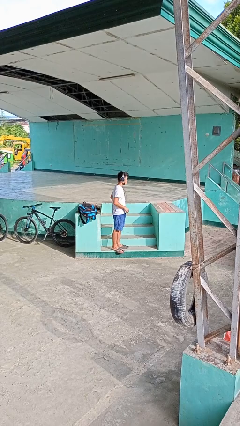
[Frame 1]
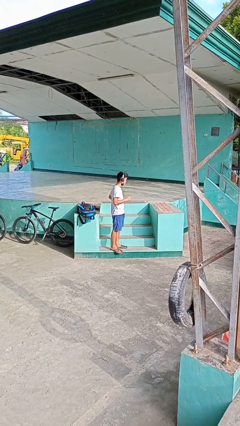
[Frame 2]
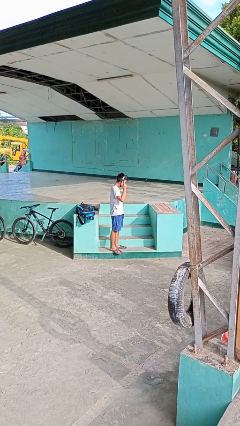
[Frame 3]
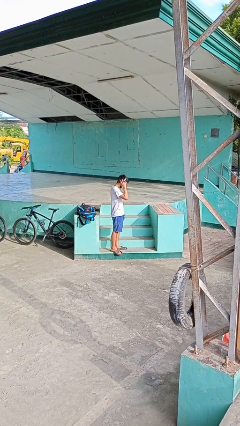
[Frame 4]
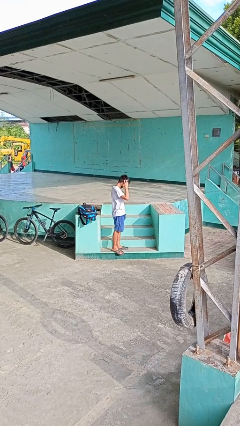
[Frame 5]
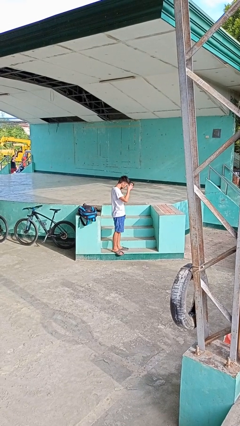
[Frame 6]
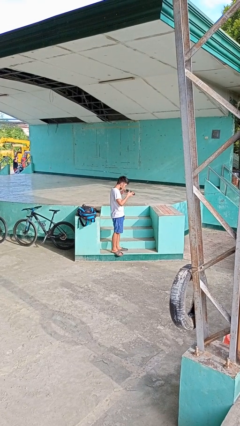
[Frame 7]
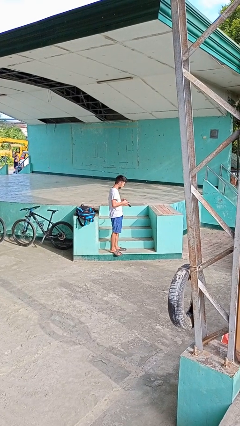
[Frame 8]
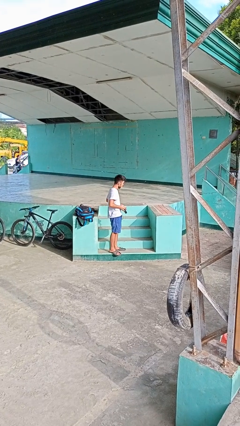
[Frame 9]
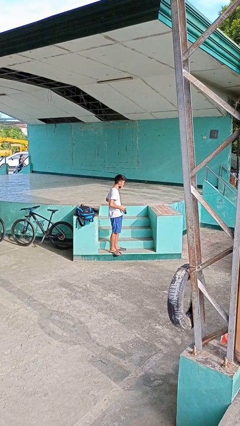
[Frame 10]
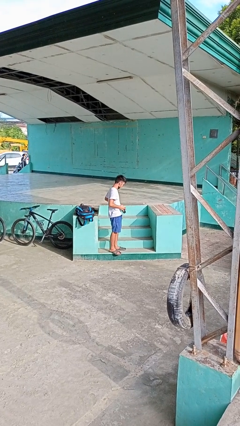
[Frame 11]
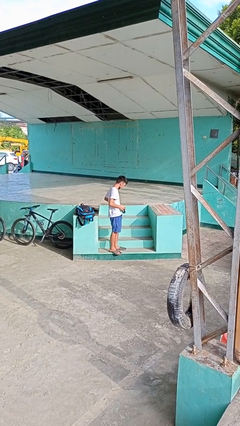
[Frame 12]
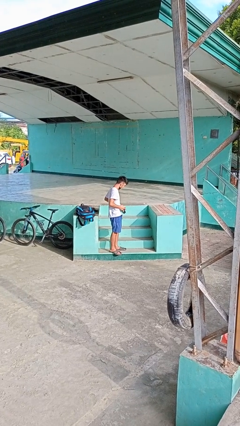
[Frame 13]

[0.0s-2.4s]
person takes off headphones

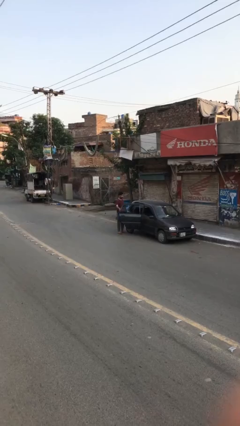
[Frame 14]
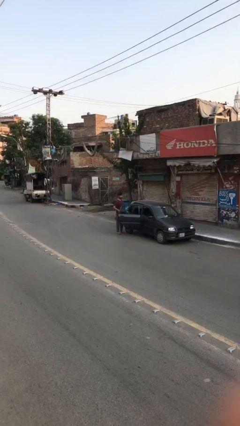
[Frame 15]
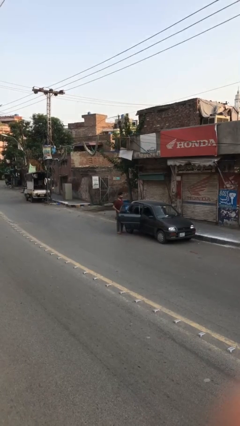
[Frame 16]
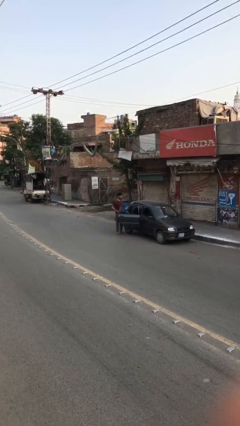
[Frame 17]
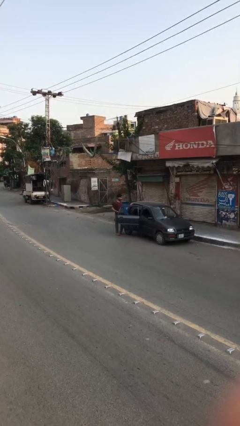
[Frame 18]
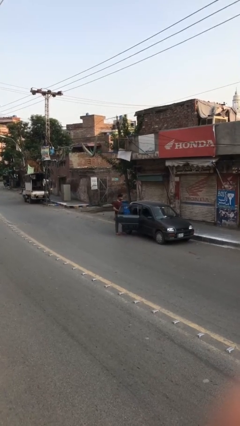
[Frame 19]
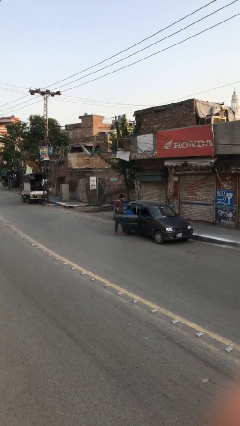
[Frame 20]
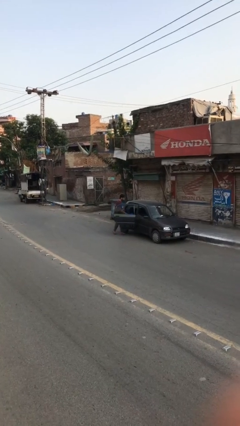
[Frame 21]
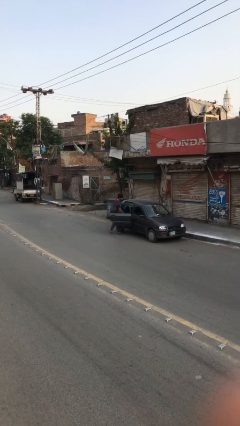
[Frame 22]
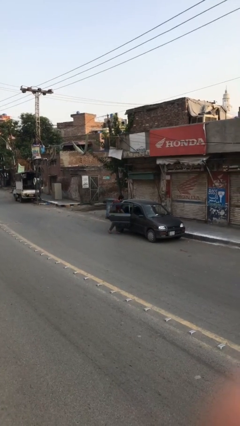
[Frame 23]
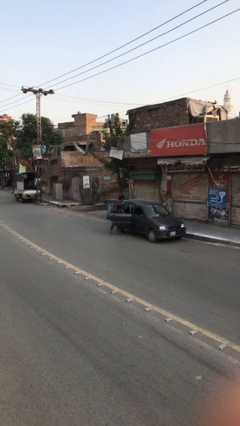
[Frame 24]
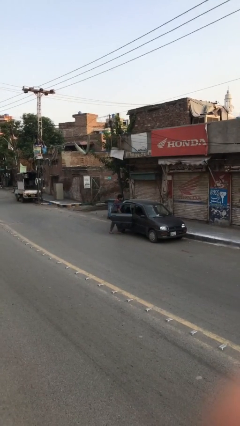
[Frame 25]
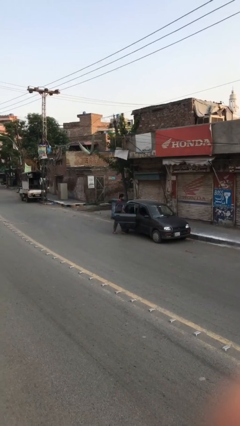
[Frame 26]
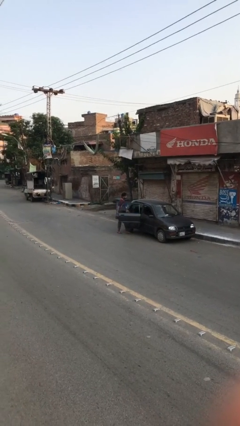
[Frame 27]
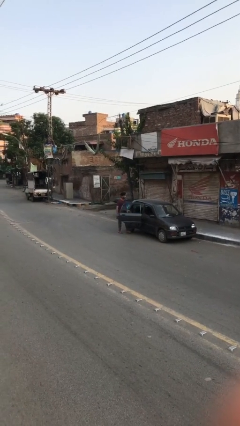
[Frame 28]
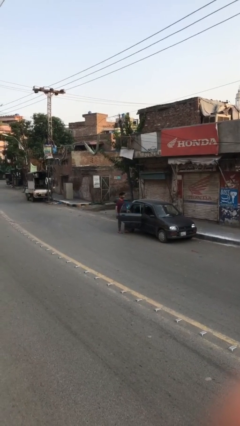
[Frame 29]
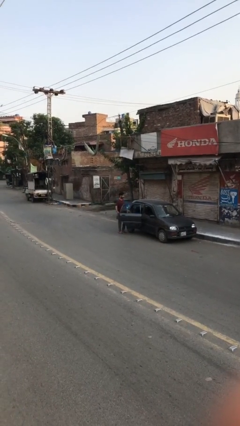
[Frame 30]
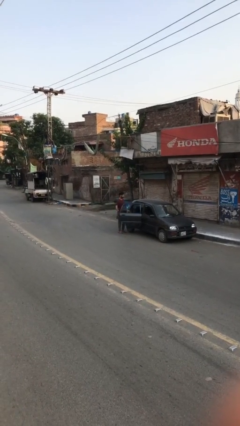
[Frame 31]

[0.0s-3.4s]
person loads car

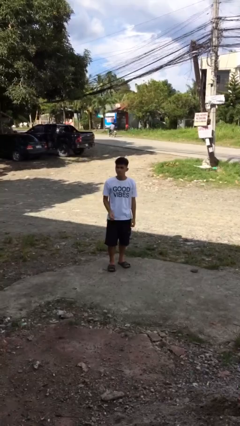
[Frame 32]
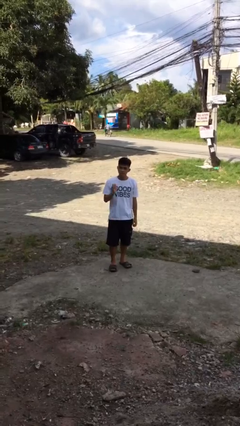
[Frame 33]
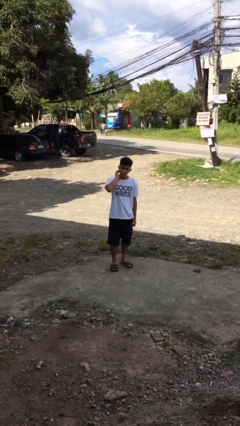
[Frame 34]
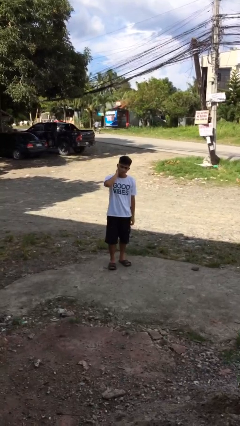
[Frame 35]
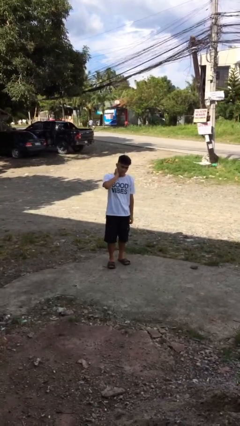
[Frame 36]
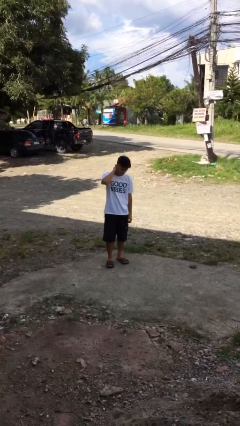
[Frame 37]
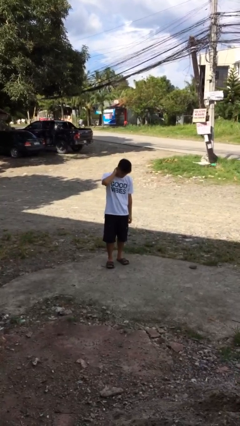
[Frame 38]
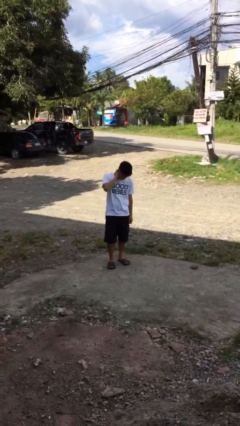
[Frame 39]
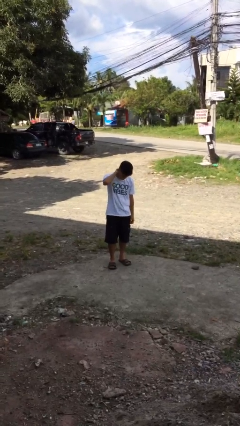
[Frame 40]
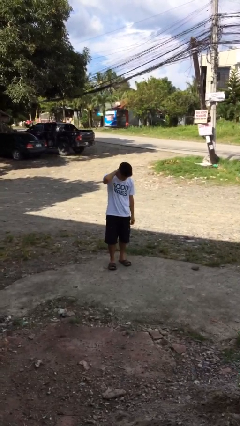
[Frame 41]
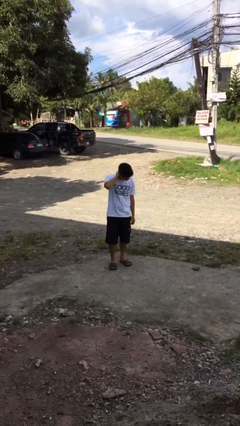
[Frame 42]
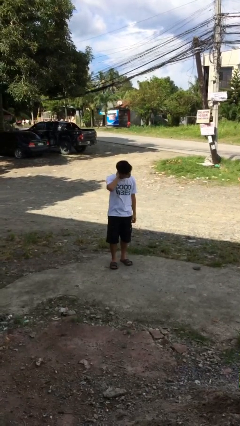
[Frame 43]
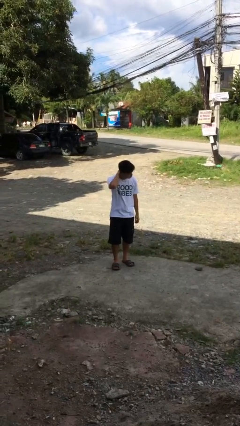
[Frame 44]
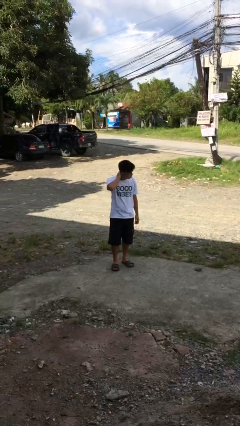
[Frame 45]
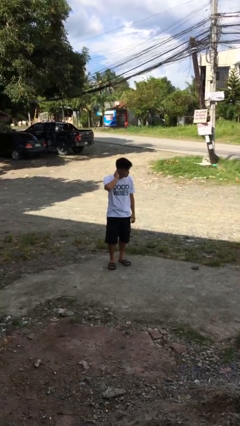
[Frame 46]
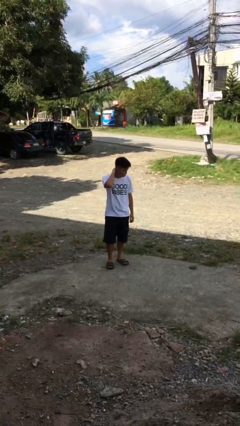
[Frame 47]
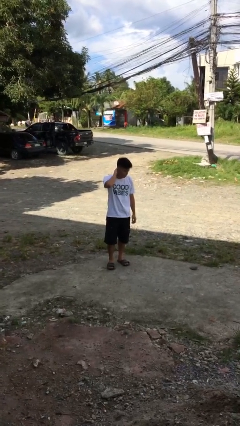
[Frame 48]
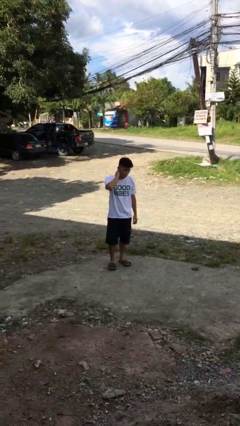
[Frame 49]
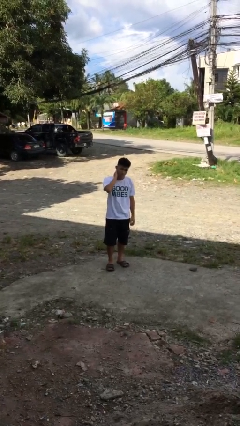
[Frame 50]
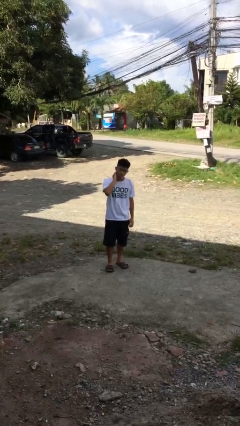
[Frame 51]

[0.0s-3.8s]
person rubs neck

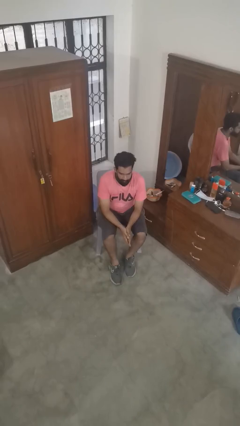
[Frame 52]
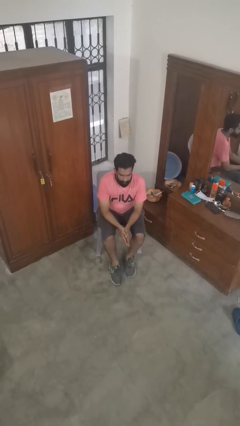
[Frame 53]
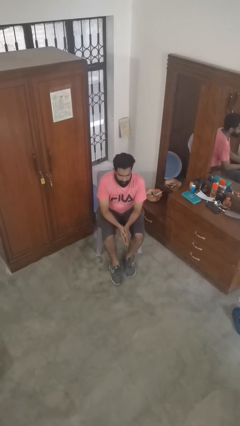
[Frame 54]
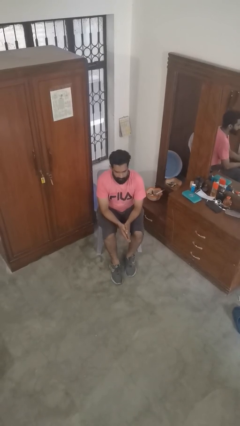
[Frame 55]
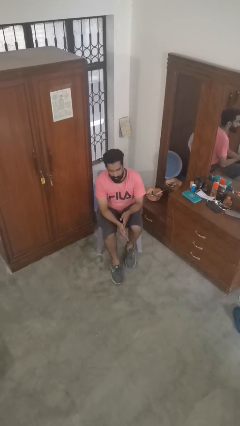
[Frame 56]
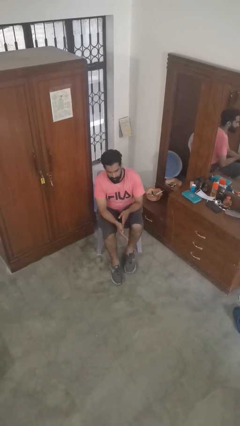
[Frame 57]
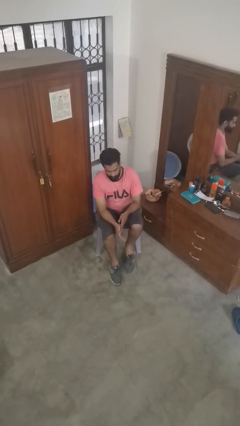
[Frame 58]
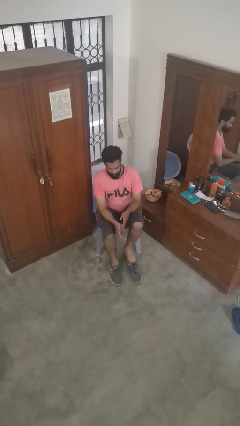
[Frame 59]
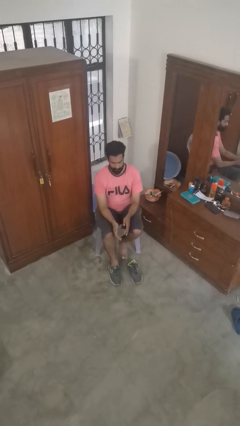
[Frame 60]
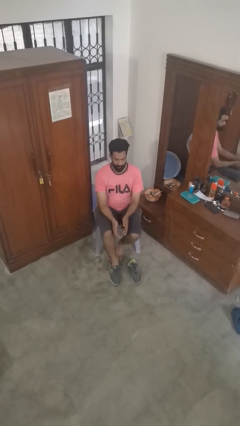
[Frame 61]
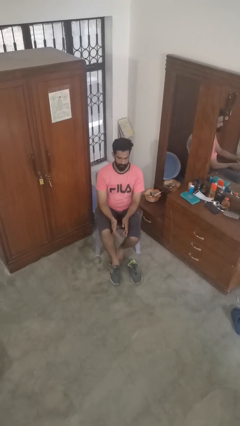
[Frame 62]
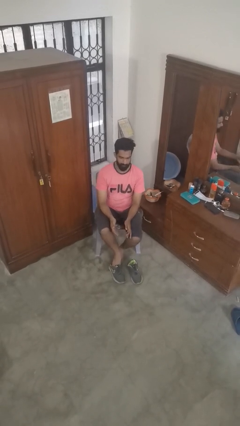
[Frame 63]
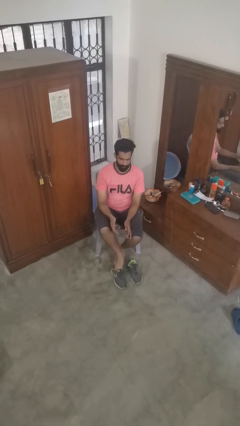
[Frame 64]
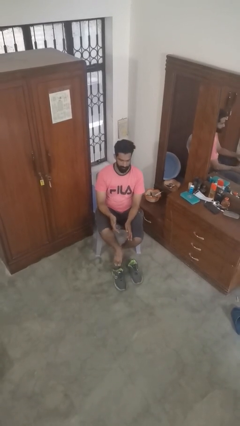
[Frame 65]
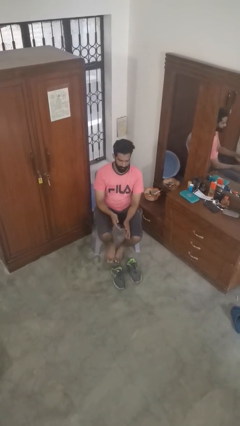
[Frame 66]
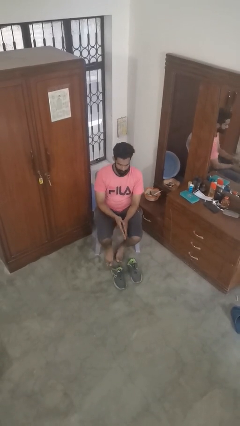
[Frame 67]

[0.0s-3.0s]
person takes off shoes

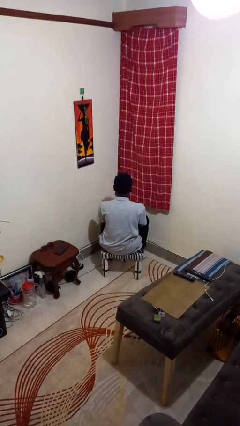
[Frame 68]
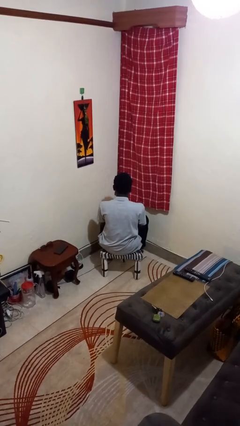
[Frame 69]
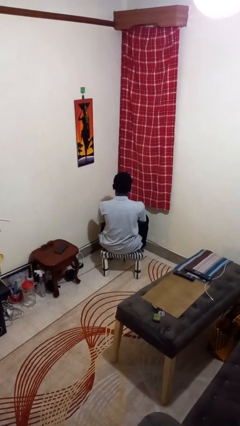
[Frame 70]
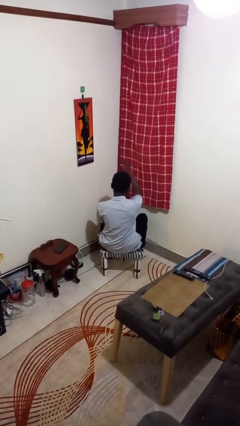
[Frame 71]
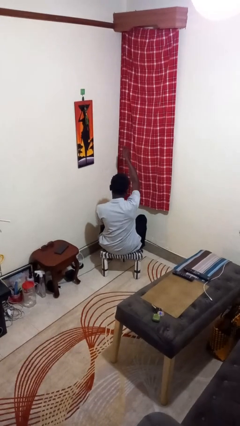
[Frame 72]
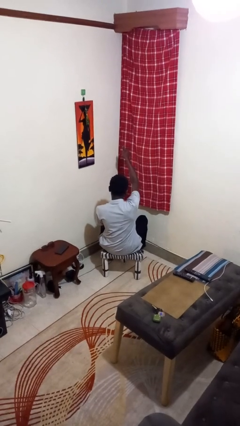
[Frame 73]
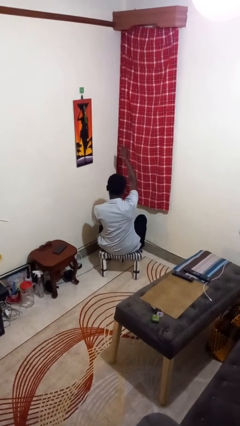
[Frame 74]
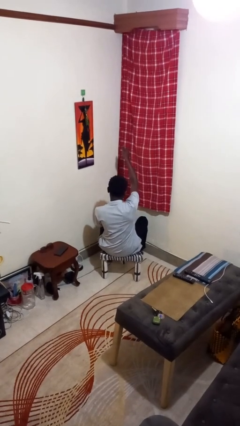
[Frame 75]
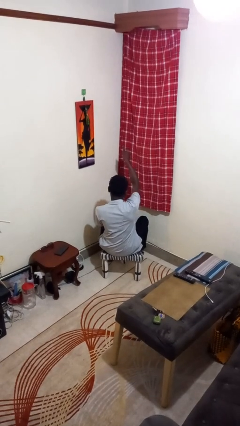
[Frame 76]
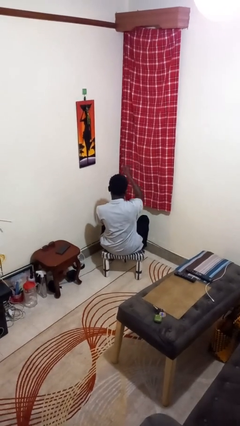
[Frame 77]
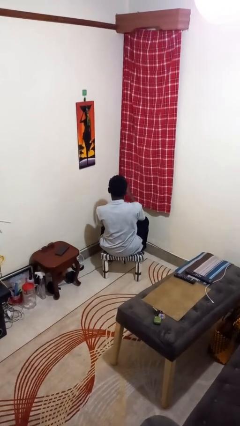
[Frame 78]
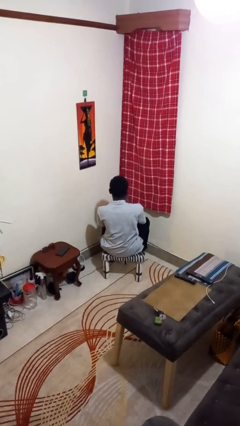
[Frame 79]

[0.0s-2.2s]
person gestures thumbs up

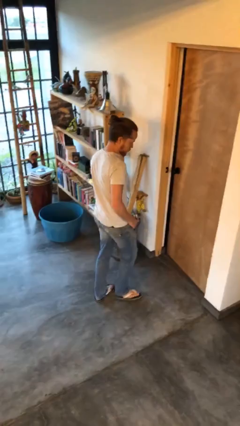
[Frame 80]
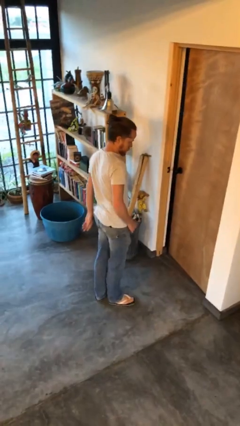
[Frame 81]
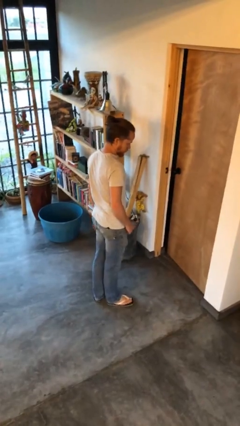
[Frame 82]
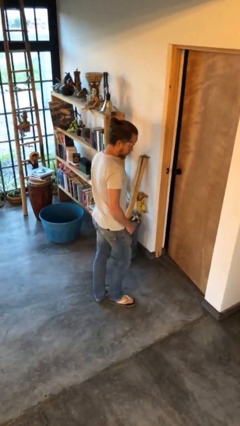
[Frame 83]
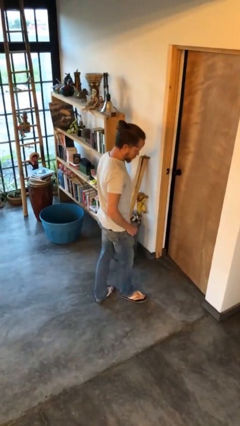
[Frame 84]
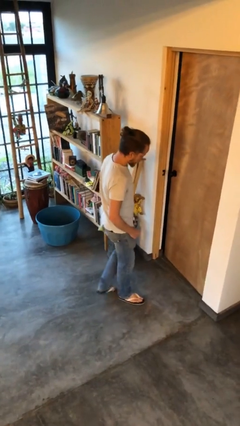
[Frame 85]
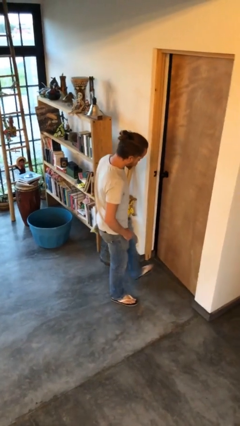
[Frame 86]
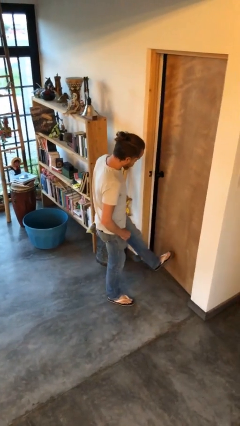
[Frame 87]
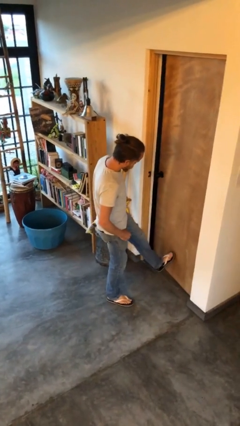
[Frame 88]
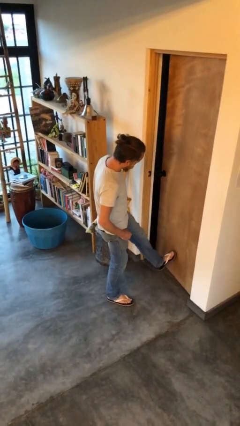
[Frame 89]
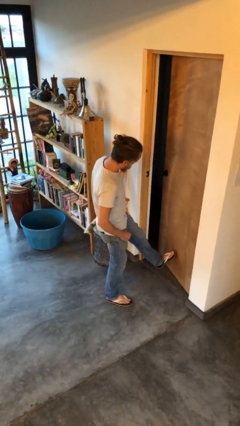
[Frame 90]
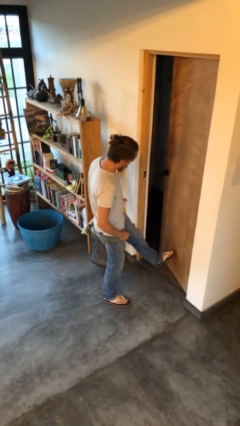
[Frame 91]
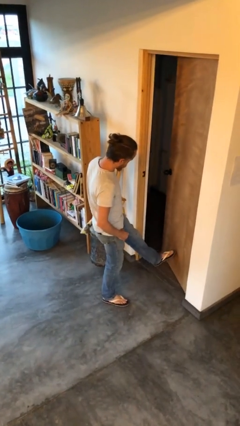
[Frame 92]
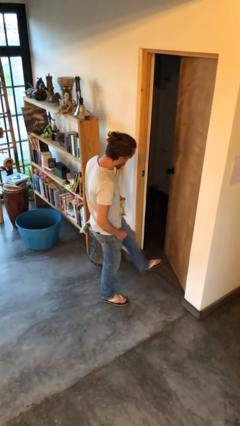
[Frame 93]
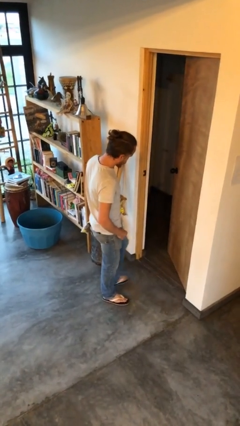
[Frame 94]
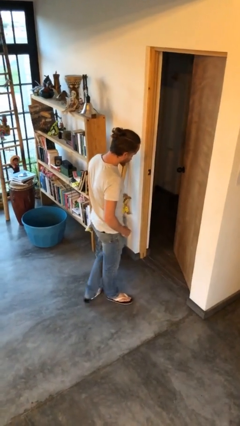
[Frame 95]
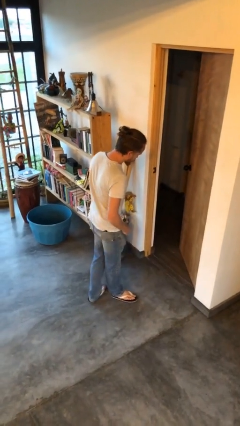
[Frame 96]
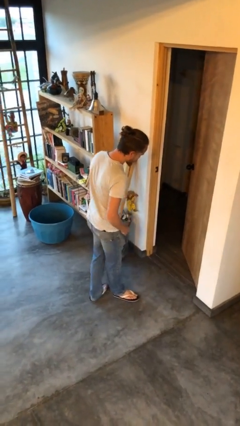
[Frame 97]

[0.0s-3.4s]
person opens facility door
